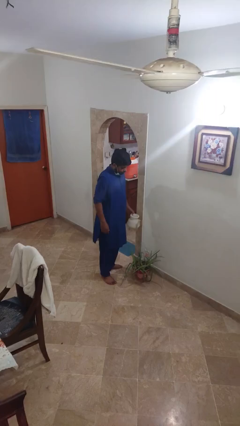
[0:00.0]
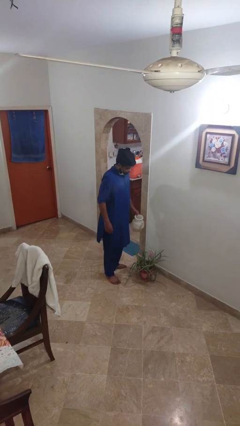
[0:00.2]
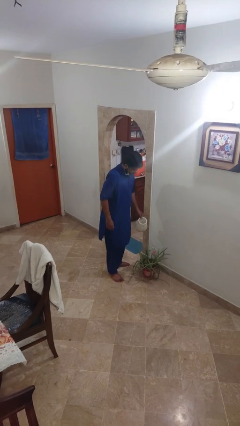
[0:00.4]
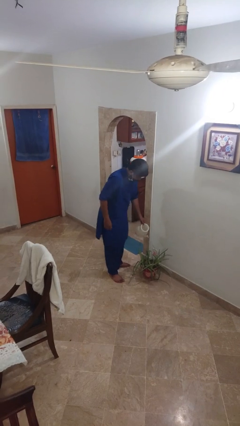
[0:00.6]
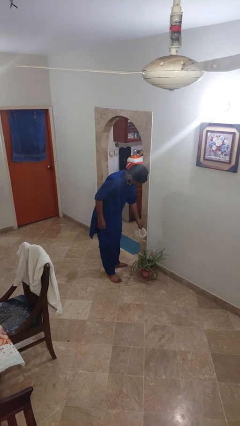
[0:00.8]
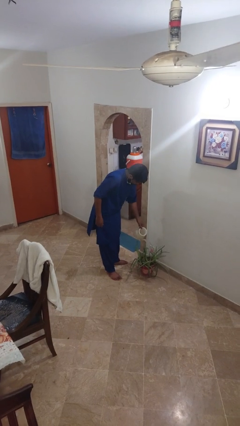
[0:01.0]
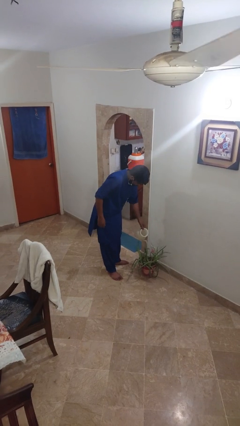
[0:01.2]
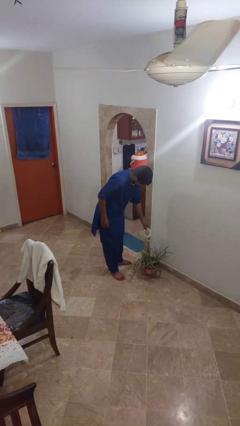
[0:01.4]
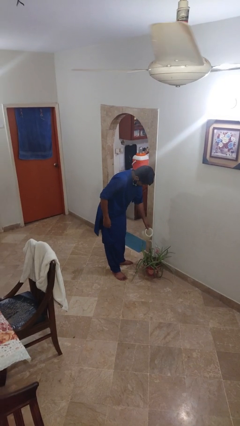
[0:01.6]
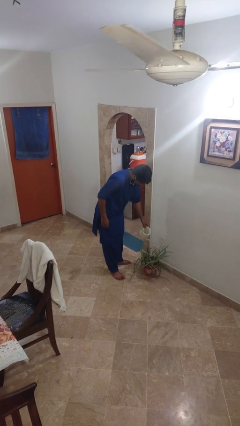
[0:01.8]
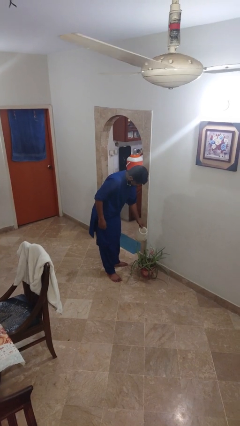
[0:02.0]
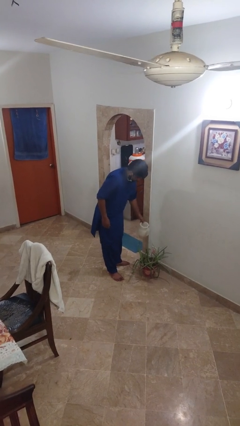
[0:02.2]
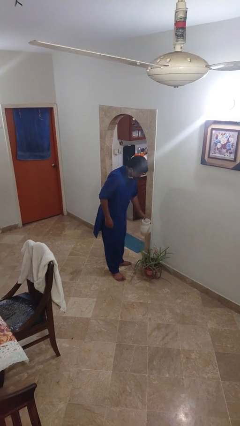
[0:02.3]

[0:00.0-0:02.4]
person waters houseplant

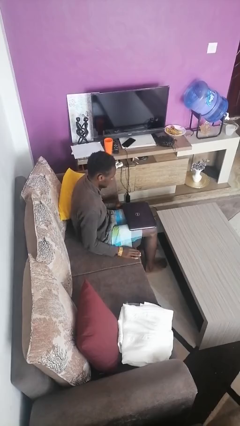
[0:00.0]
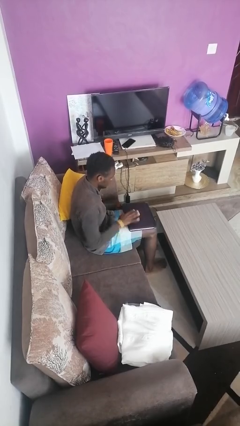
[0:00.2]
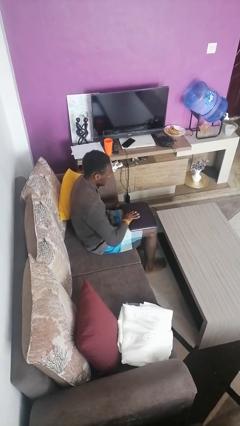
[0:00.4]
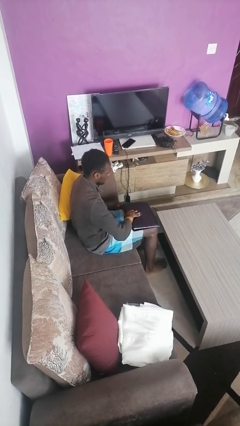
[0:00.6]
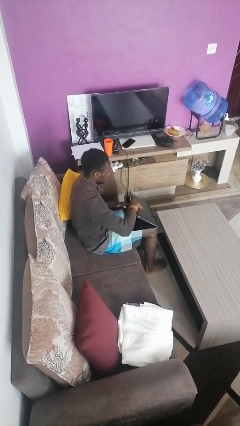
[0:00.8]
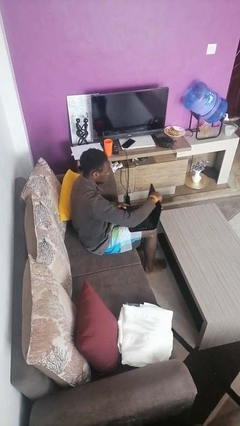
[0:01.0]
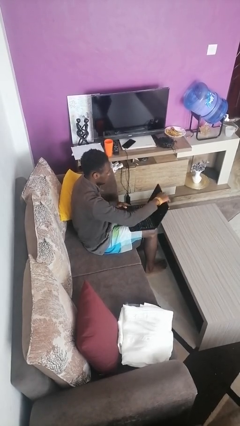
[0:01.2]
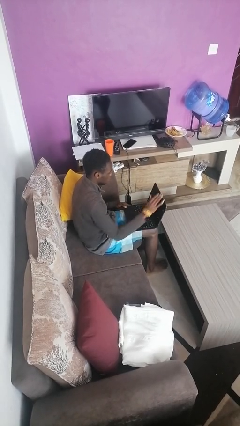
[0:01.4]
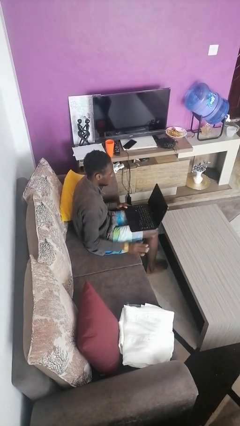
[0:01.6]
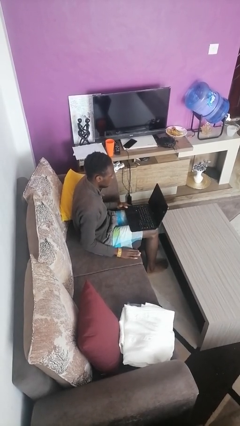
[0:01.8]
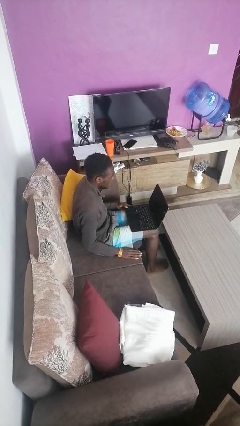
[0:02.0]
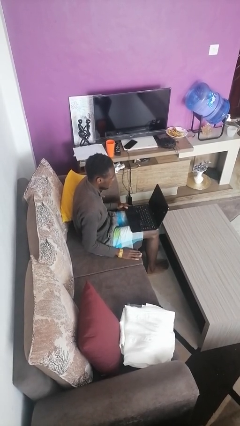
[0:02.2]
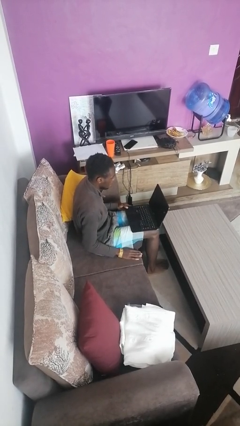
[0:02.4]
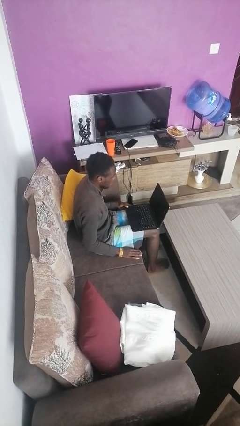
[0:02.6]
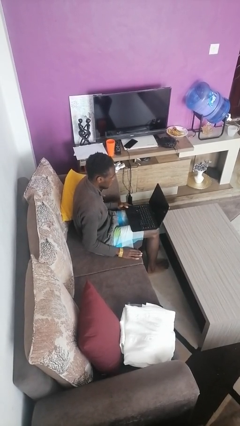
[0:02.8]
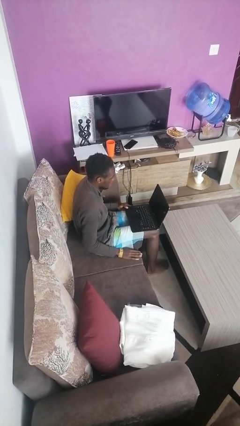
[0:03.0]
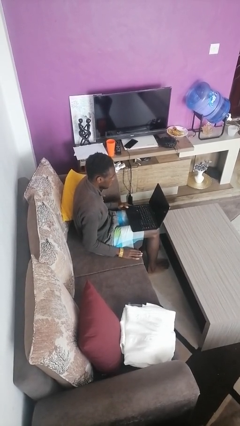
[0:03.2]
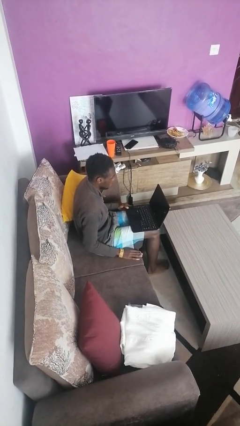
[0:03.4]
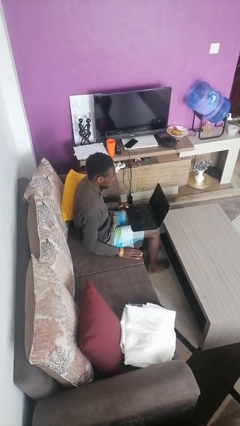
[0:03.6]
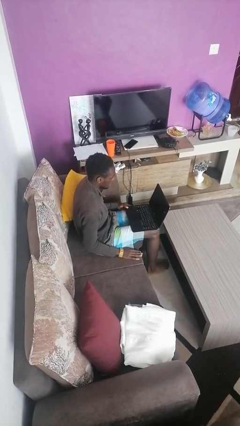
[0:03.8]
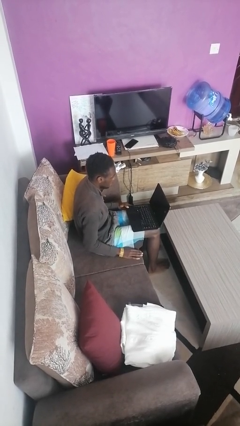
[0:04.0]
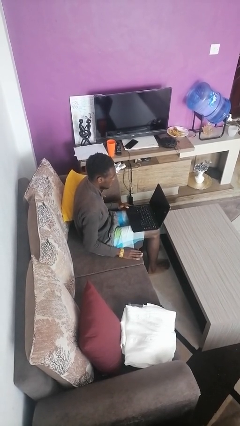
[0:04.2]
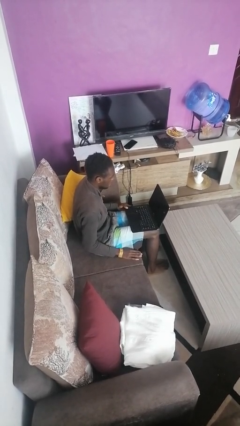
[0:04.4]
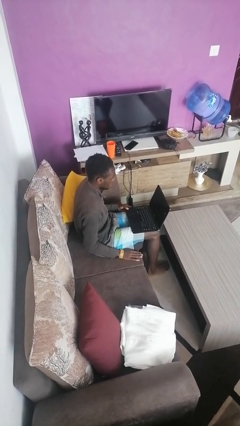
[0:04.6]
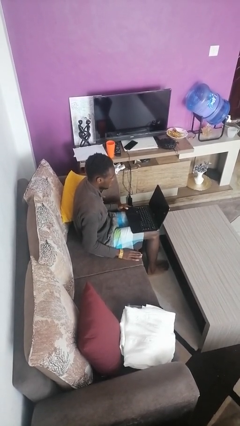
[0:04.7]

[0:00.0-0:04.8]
person opens laptop

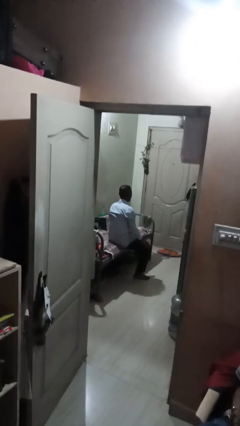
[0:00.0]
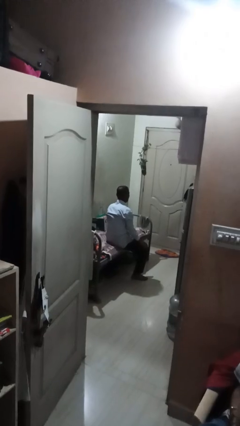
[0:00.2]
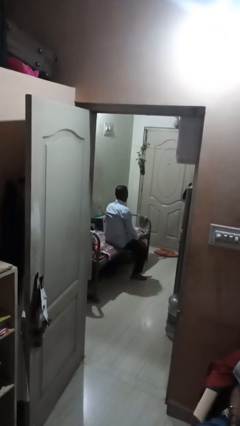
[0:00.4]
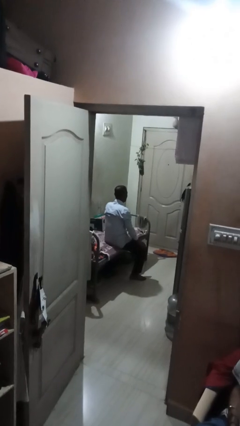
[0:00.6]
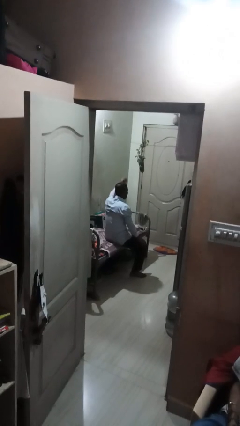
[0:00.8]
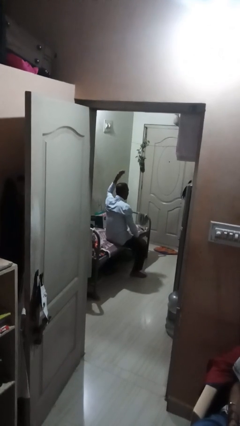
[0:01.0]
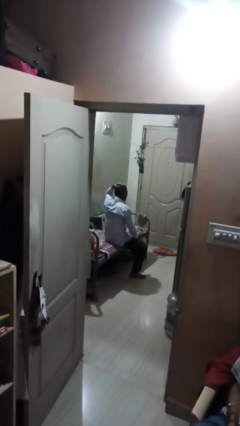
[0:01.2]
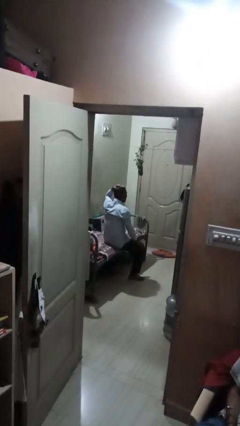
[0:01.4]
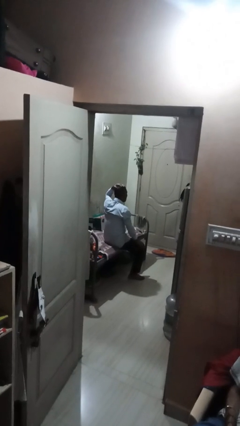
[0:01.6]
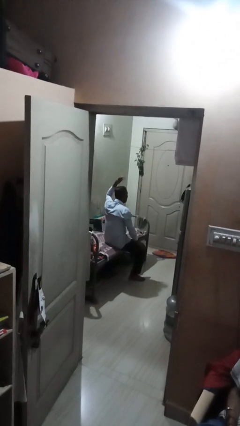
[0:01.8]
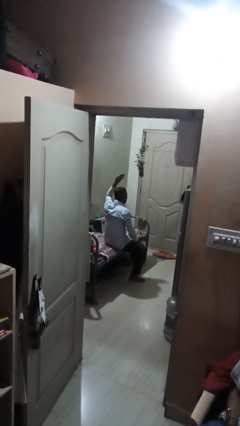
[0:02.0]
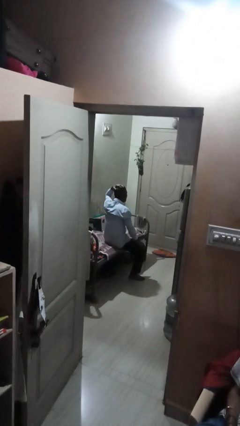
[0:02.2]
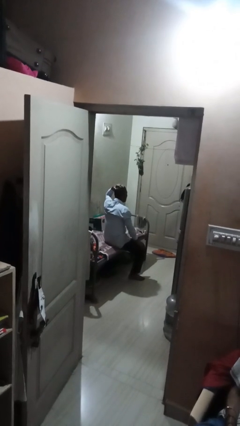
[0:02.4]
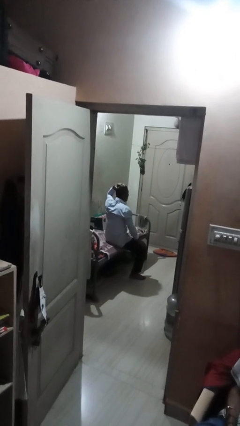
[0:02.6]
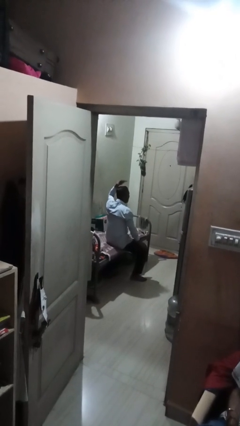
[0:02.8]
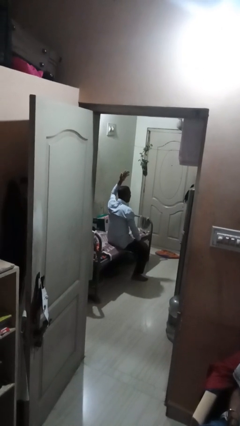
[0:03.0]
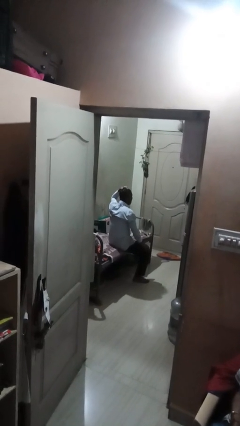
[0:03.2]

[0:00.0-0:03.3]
person pats head

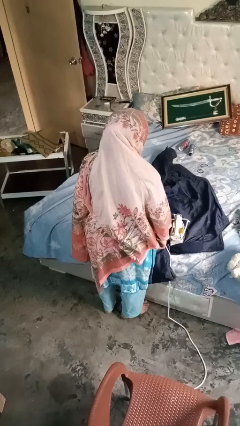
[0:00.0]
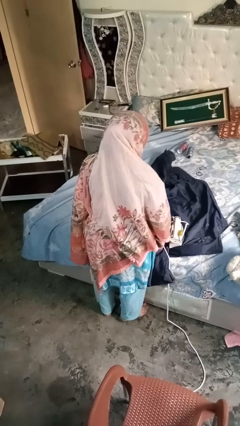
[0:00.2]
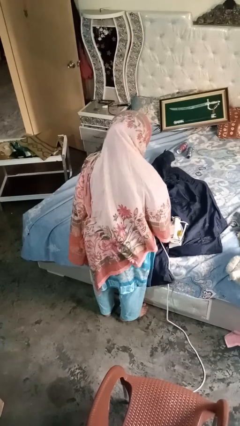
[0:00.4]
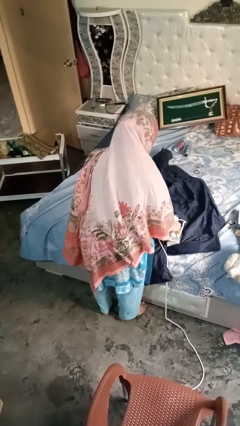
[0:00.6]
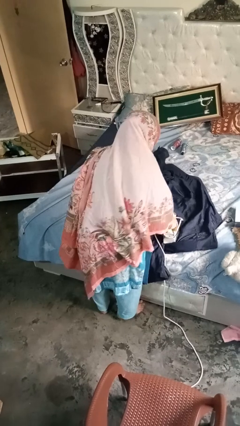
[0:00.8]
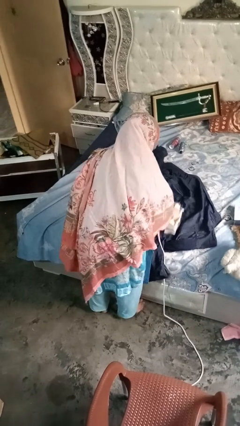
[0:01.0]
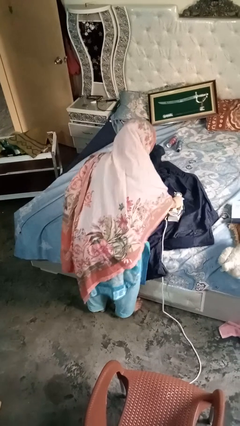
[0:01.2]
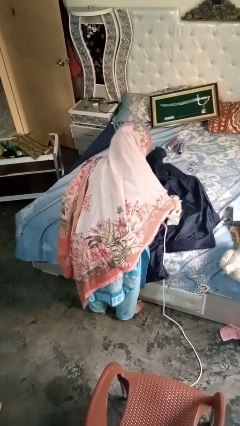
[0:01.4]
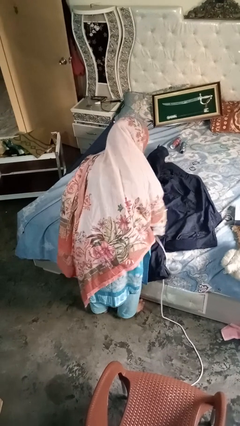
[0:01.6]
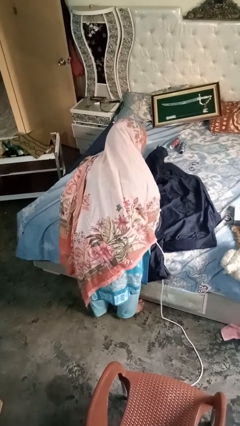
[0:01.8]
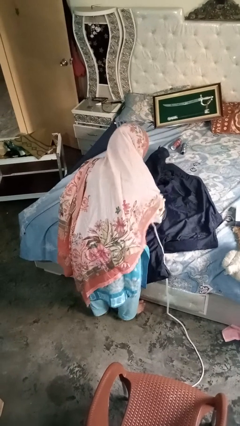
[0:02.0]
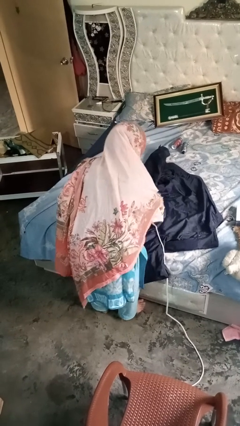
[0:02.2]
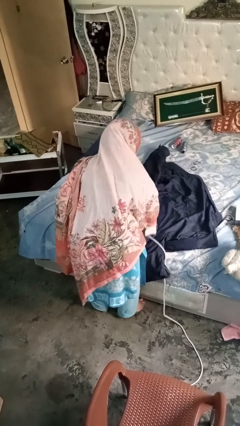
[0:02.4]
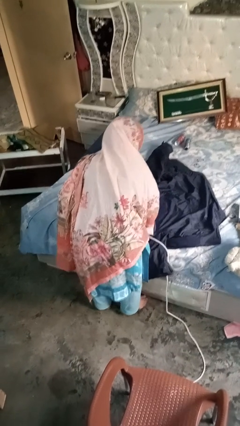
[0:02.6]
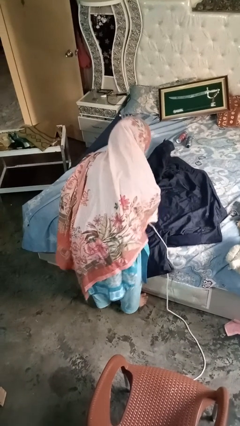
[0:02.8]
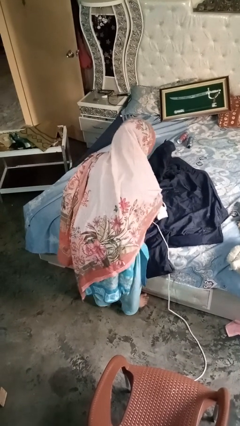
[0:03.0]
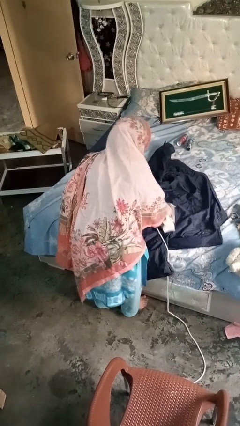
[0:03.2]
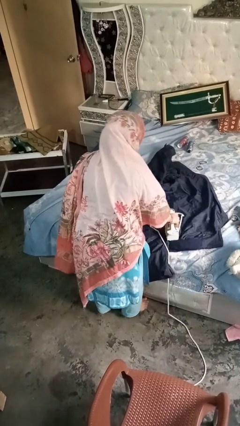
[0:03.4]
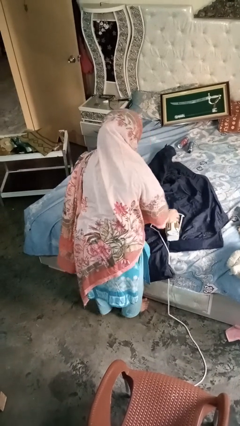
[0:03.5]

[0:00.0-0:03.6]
person irons clothes

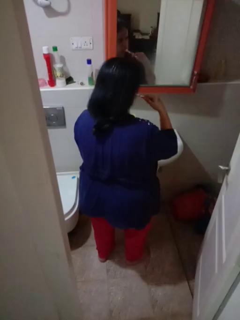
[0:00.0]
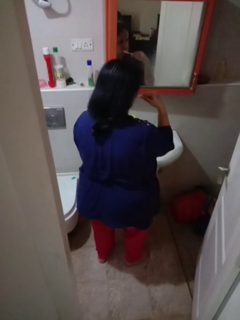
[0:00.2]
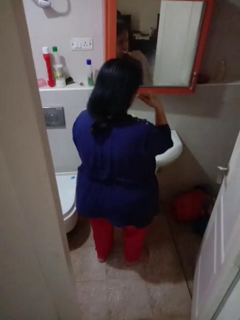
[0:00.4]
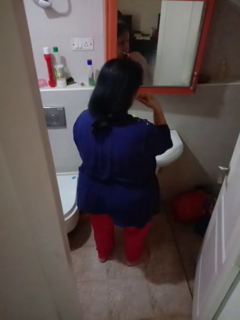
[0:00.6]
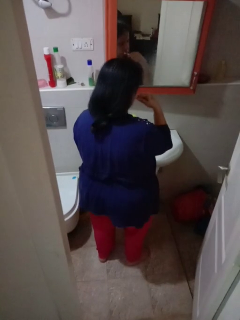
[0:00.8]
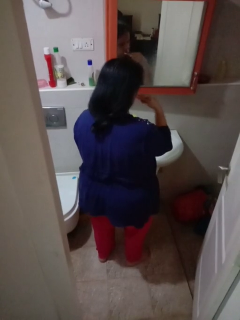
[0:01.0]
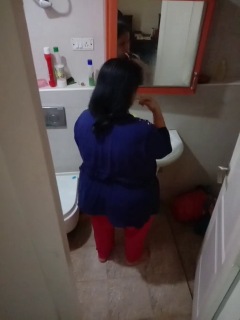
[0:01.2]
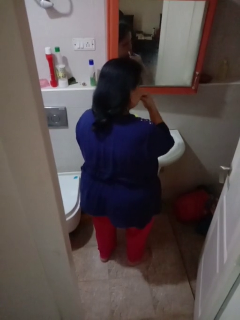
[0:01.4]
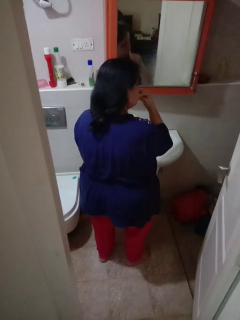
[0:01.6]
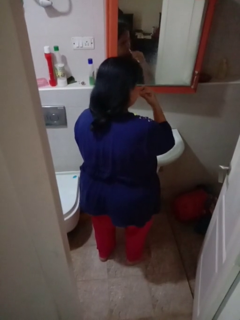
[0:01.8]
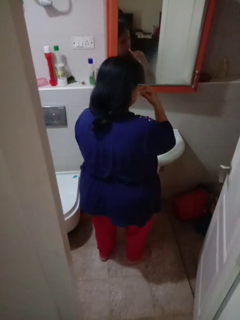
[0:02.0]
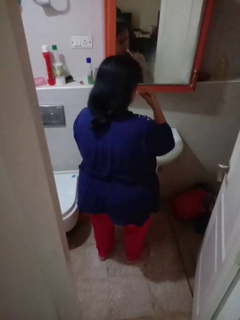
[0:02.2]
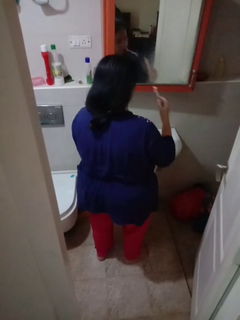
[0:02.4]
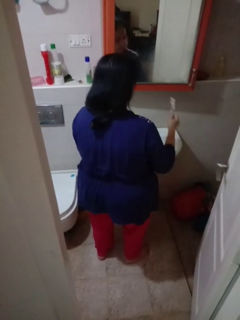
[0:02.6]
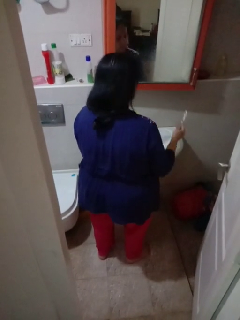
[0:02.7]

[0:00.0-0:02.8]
person brushes teeth

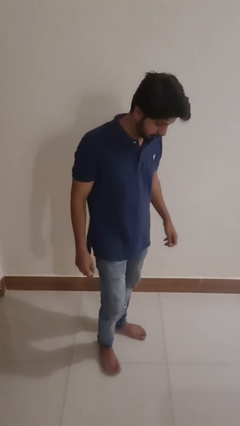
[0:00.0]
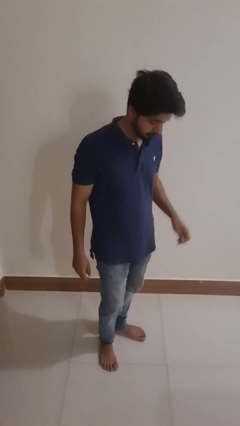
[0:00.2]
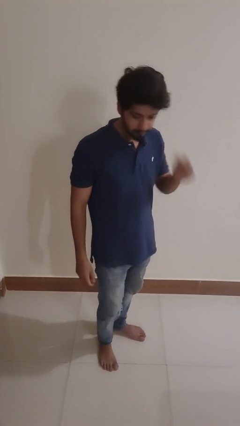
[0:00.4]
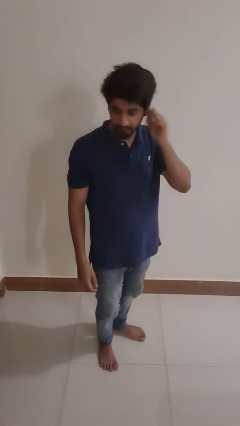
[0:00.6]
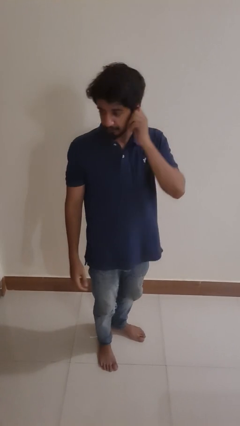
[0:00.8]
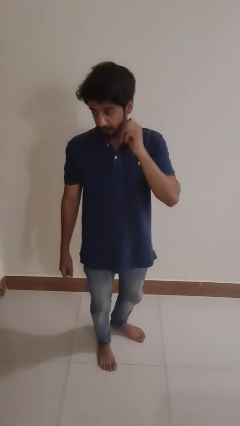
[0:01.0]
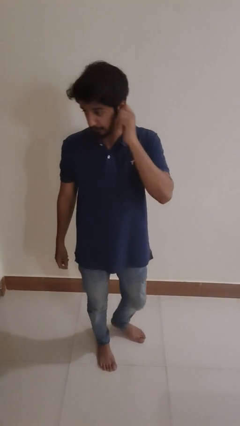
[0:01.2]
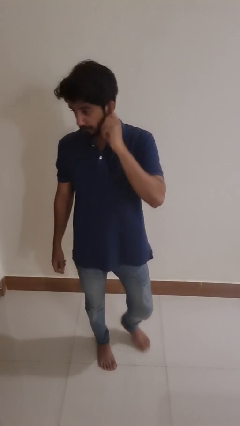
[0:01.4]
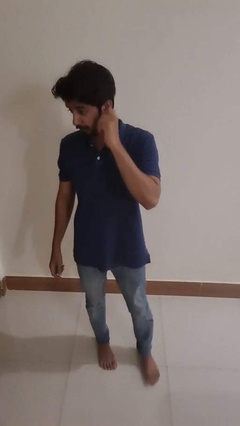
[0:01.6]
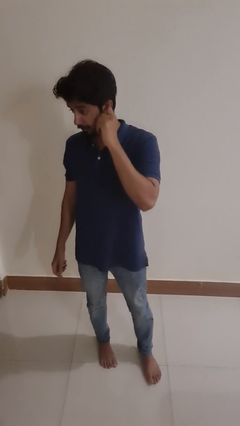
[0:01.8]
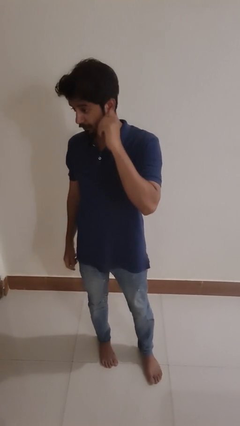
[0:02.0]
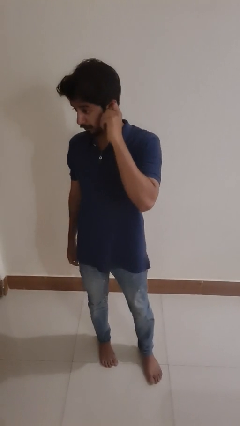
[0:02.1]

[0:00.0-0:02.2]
person touches earlobe
